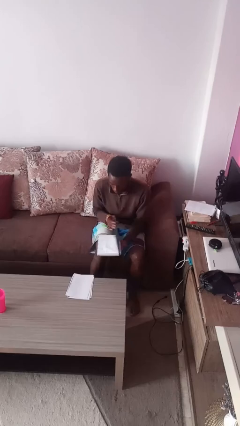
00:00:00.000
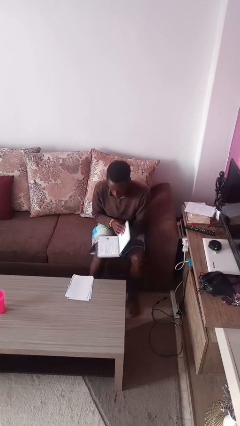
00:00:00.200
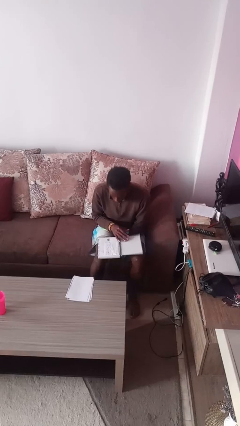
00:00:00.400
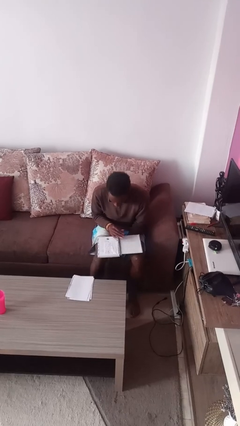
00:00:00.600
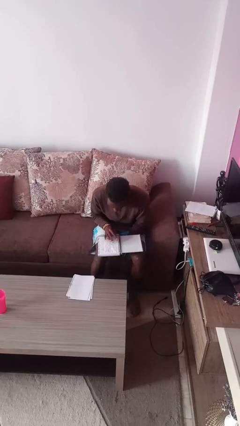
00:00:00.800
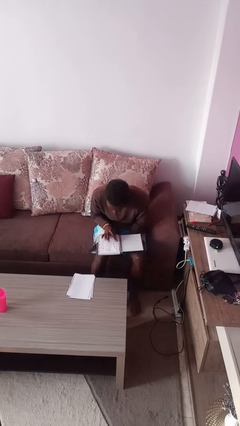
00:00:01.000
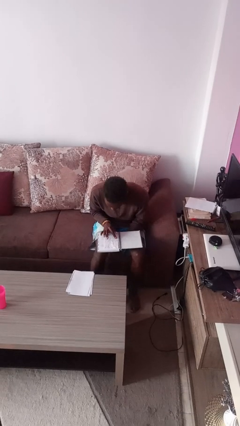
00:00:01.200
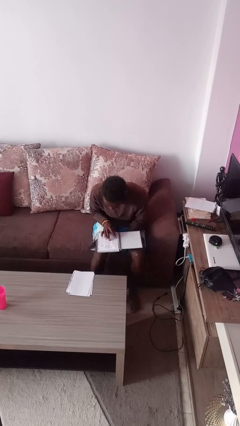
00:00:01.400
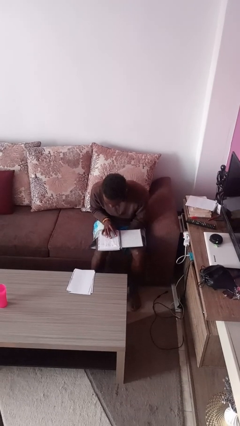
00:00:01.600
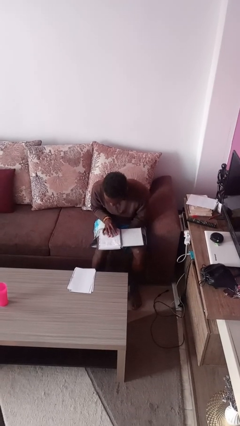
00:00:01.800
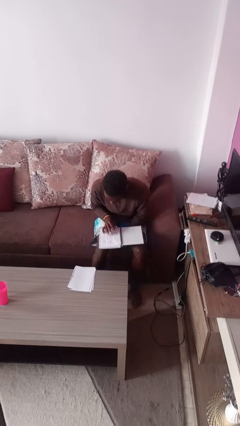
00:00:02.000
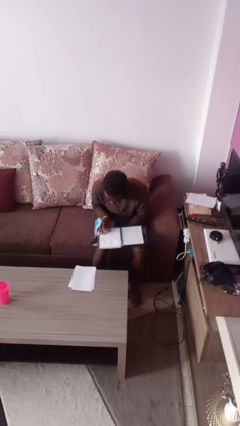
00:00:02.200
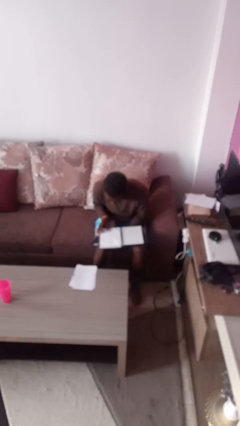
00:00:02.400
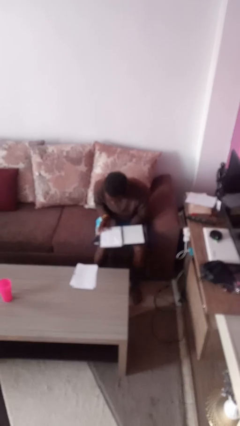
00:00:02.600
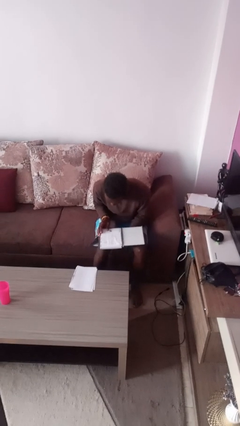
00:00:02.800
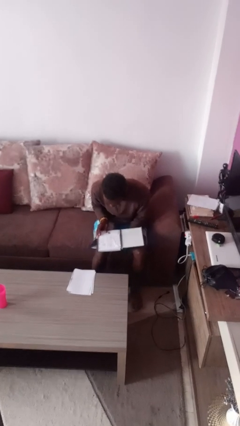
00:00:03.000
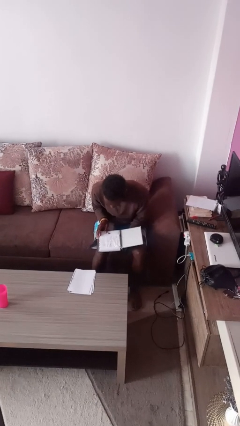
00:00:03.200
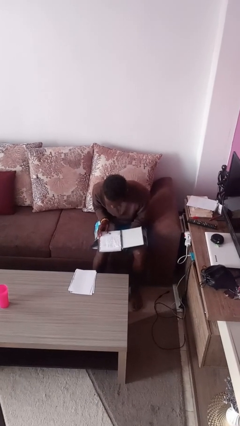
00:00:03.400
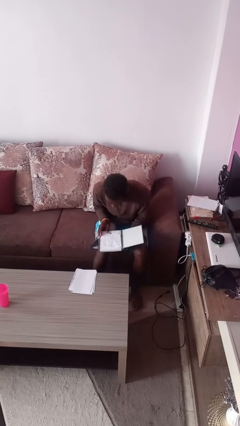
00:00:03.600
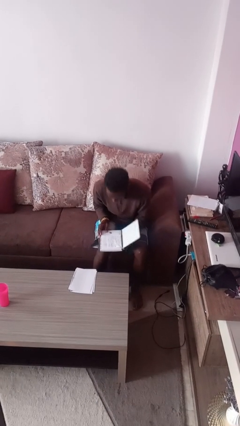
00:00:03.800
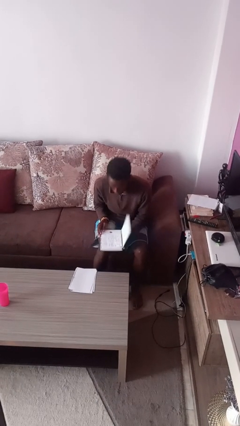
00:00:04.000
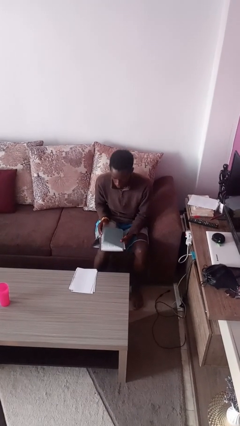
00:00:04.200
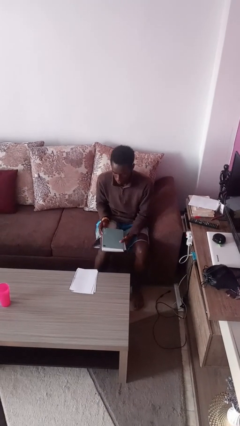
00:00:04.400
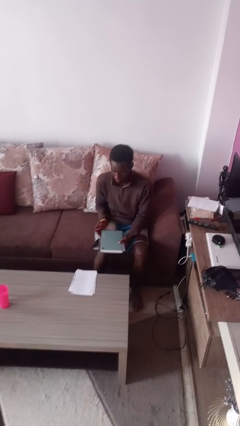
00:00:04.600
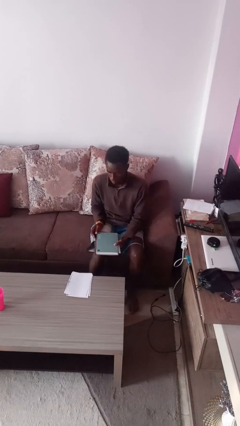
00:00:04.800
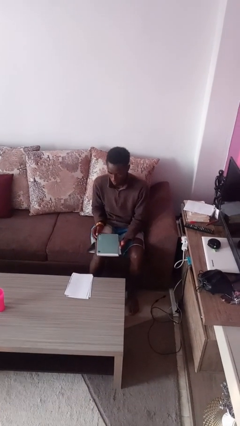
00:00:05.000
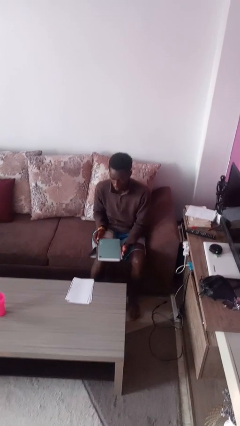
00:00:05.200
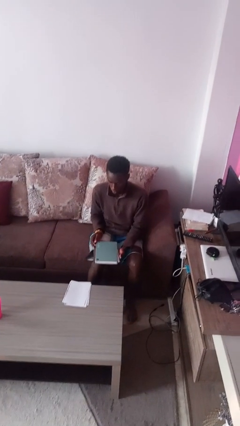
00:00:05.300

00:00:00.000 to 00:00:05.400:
person reads book

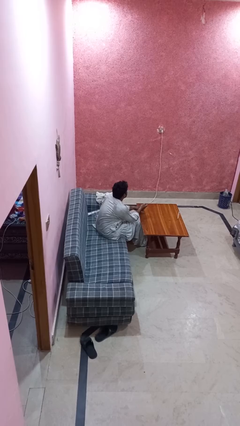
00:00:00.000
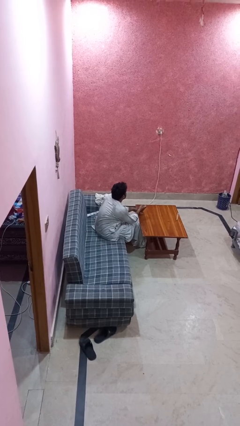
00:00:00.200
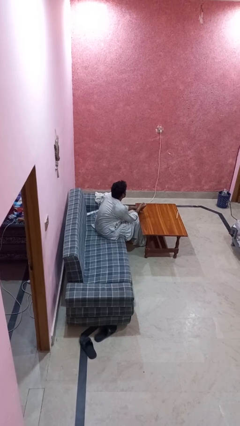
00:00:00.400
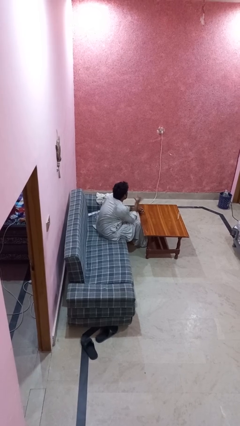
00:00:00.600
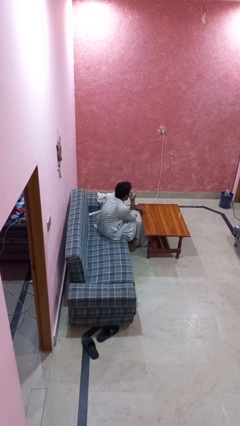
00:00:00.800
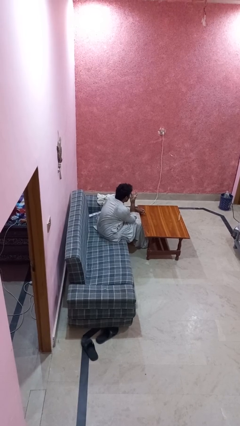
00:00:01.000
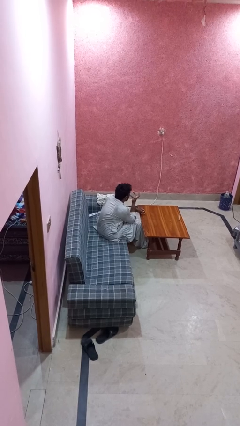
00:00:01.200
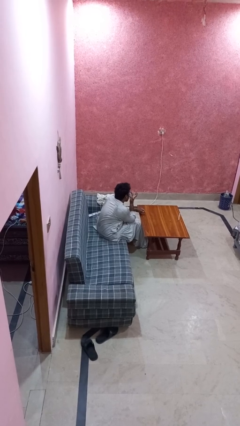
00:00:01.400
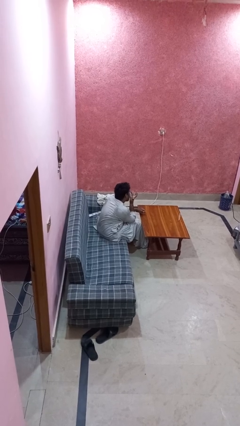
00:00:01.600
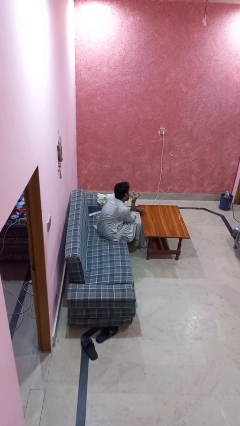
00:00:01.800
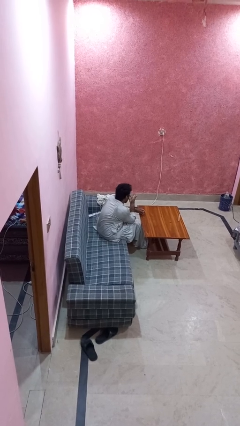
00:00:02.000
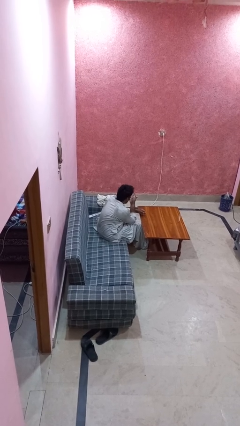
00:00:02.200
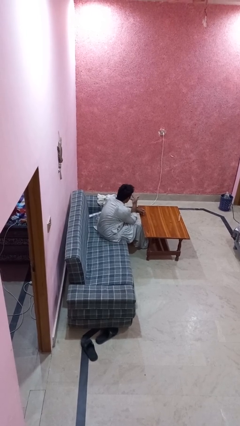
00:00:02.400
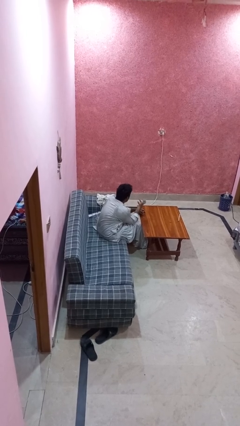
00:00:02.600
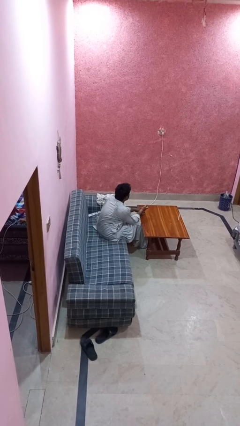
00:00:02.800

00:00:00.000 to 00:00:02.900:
person licks fingers

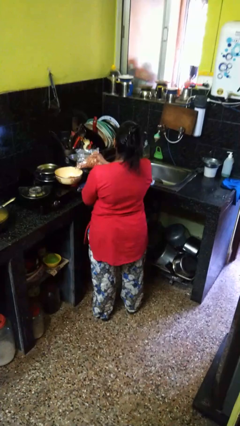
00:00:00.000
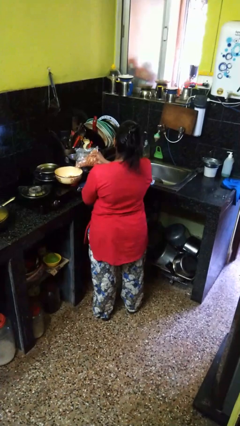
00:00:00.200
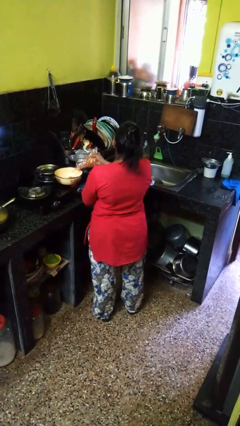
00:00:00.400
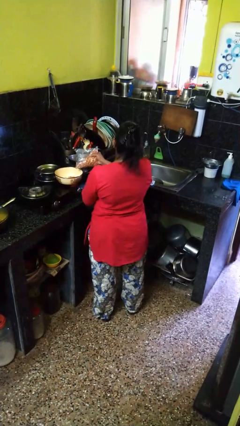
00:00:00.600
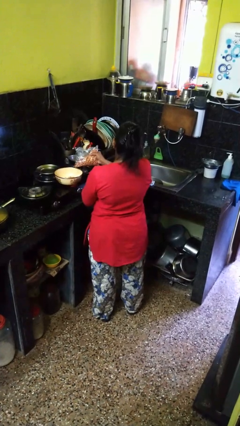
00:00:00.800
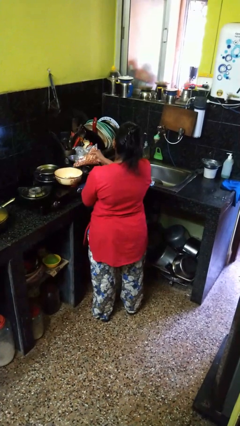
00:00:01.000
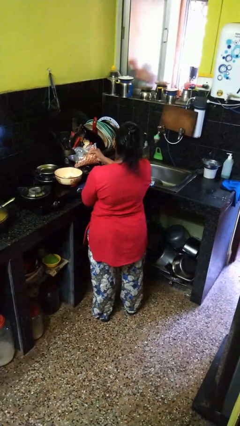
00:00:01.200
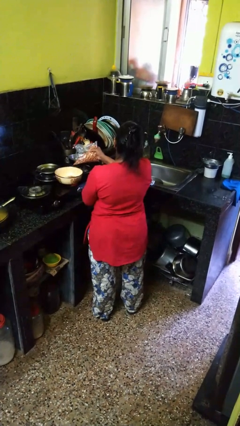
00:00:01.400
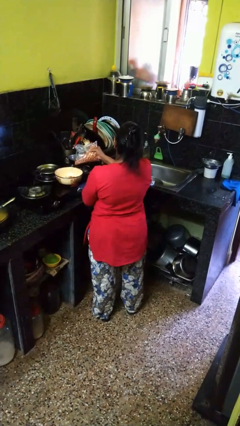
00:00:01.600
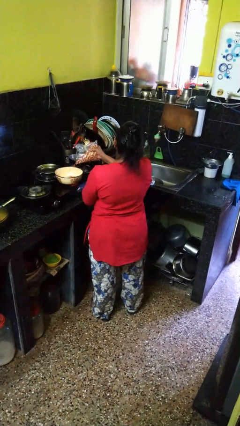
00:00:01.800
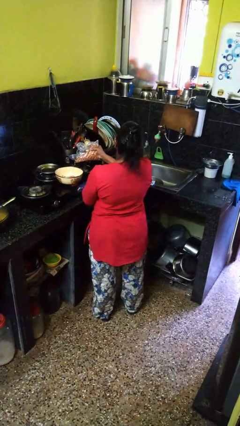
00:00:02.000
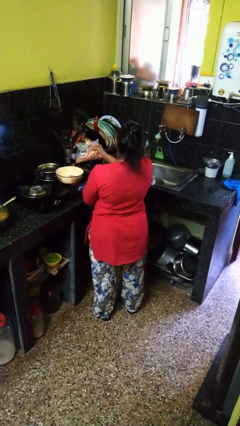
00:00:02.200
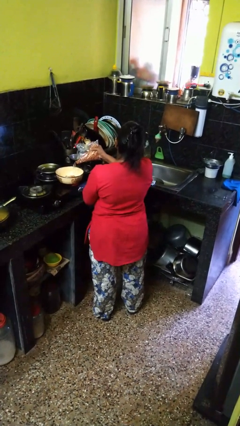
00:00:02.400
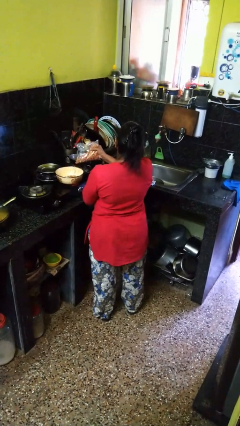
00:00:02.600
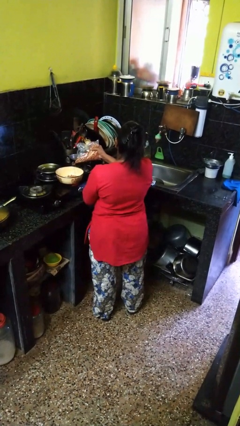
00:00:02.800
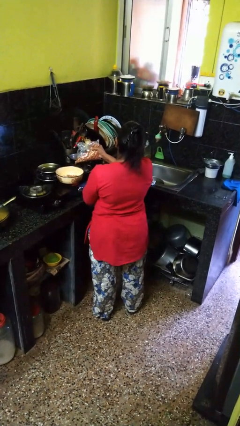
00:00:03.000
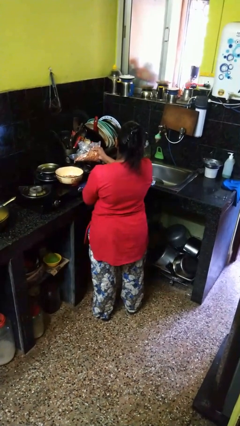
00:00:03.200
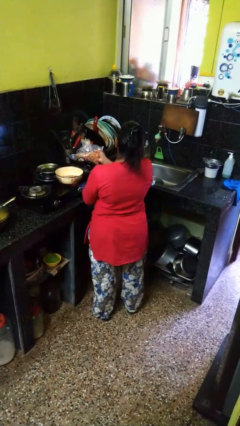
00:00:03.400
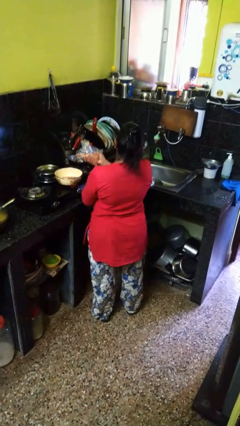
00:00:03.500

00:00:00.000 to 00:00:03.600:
person pours into bowl

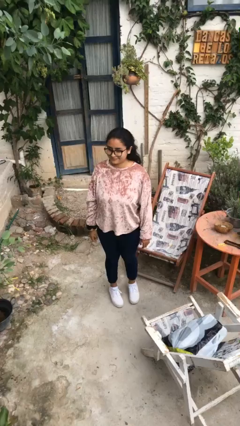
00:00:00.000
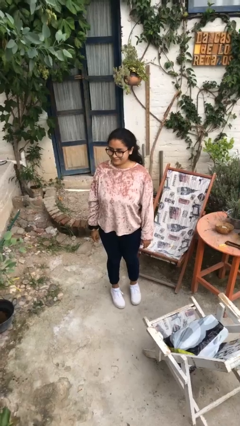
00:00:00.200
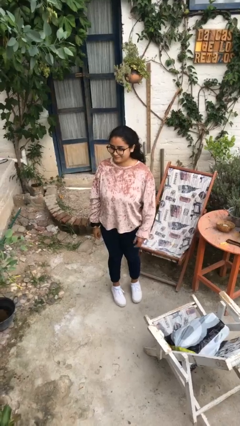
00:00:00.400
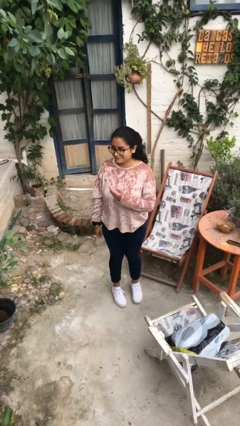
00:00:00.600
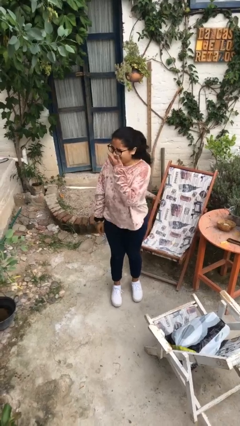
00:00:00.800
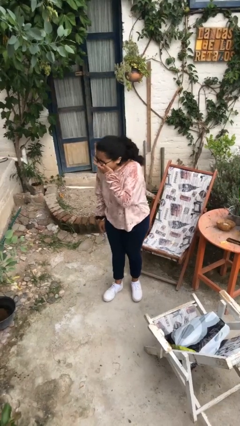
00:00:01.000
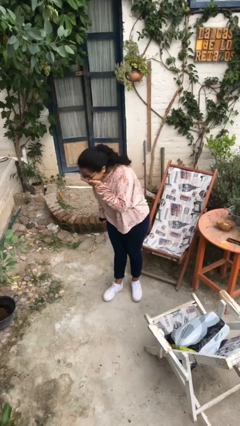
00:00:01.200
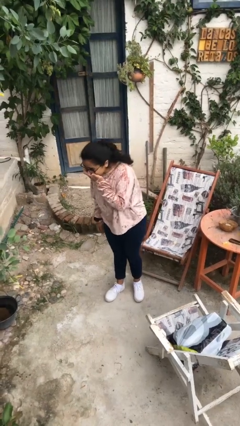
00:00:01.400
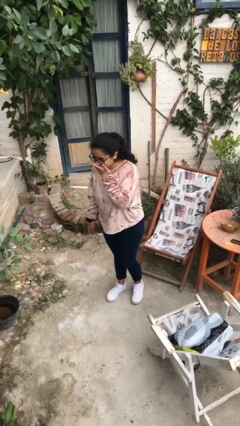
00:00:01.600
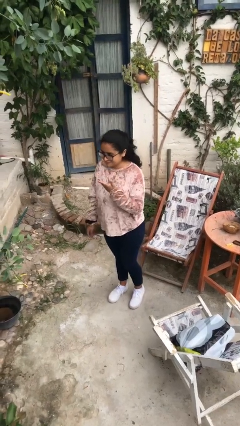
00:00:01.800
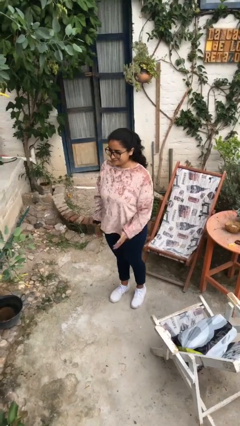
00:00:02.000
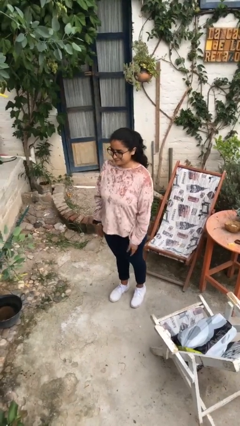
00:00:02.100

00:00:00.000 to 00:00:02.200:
person sneezes into hand

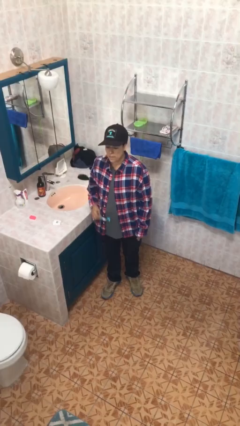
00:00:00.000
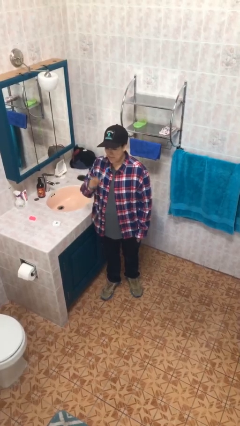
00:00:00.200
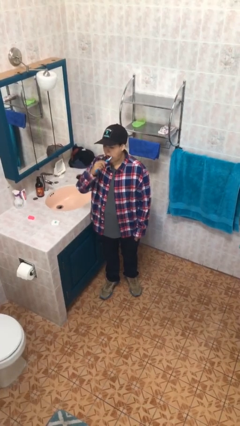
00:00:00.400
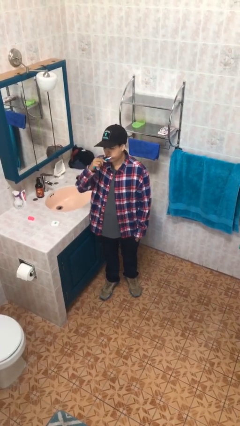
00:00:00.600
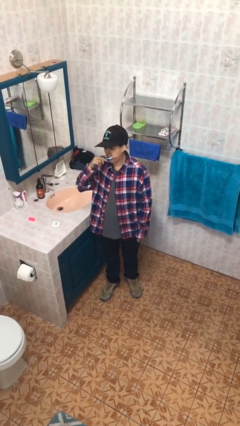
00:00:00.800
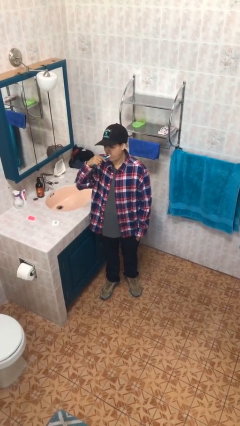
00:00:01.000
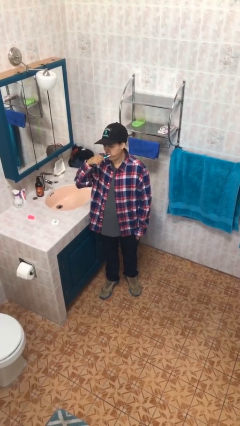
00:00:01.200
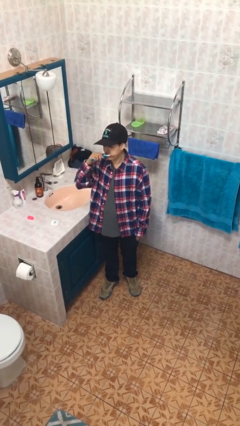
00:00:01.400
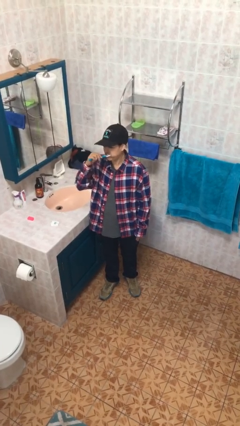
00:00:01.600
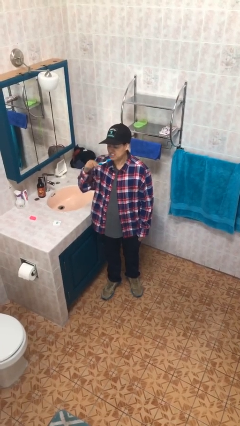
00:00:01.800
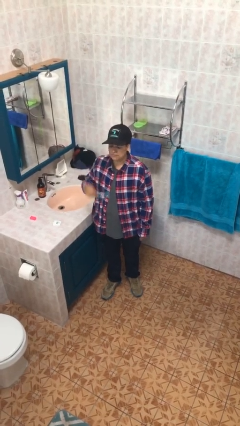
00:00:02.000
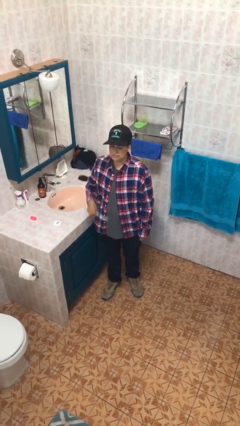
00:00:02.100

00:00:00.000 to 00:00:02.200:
person brushes teeth

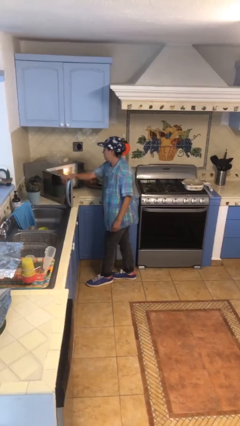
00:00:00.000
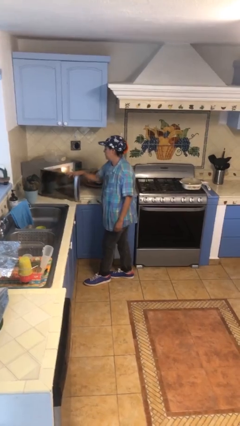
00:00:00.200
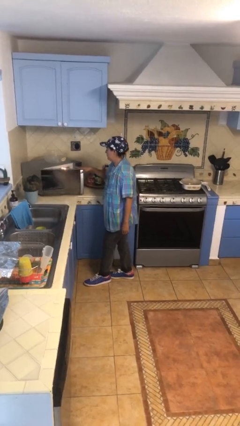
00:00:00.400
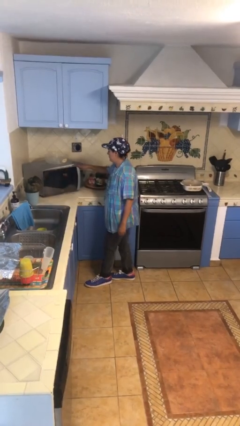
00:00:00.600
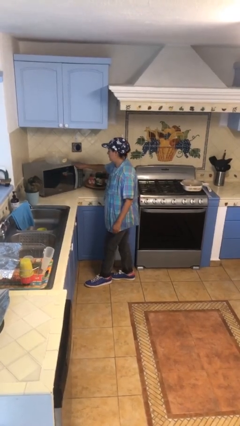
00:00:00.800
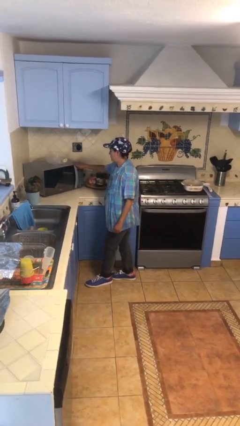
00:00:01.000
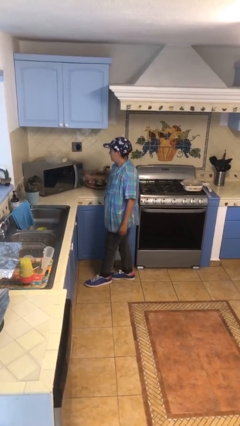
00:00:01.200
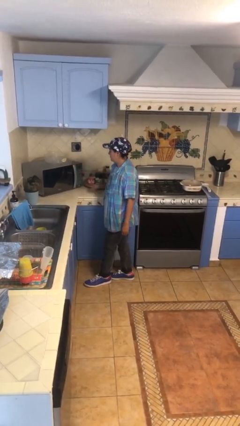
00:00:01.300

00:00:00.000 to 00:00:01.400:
person closes microwave
